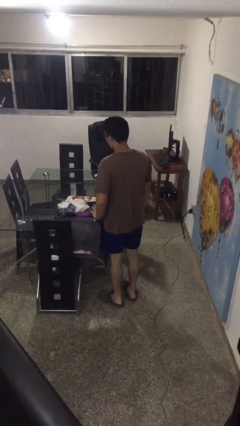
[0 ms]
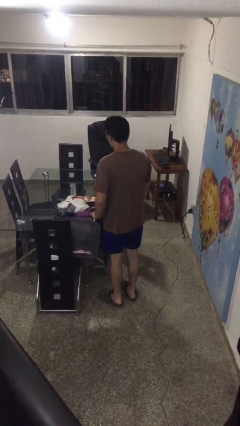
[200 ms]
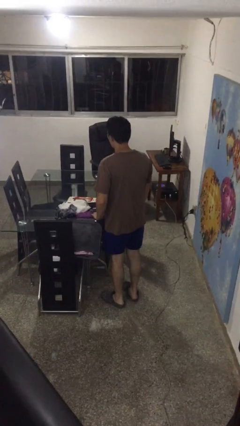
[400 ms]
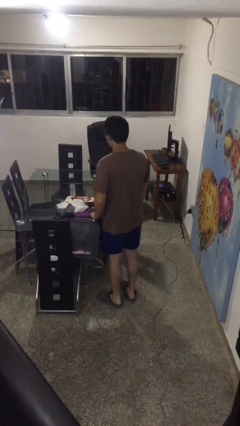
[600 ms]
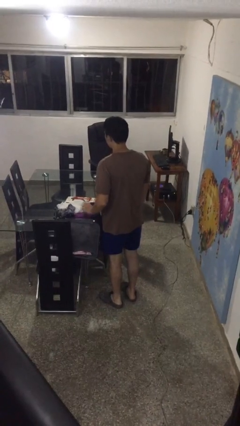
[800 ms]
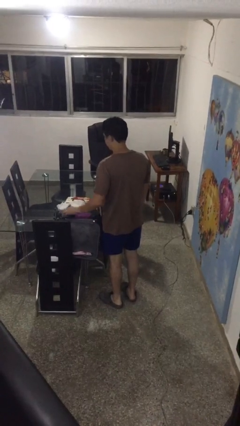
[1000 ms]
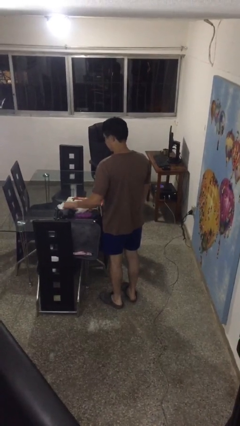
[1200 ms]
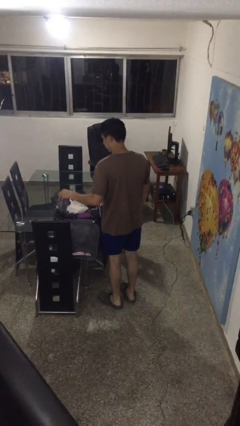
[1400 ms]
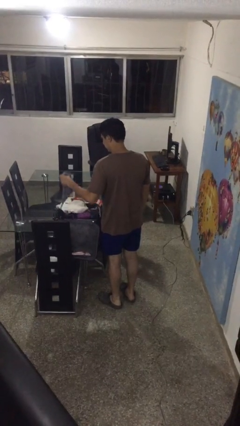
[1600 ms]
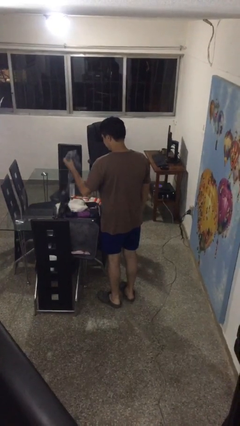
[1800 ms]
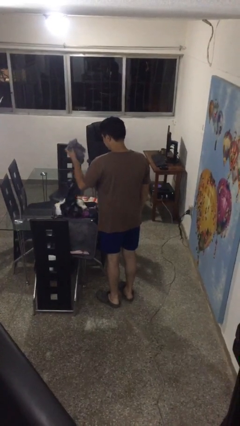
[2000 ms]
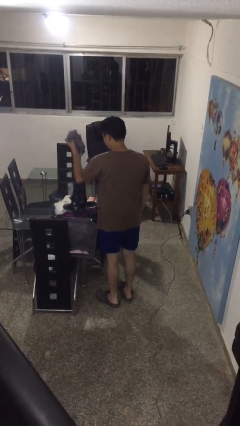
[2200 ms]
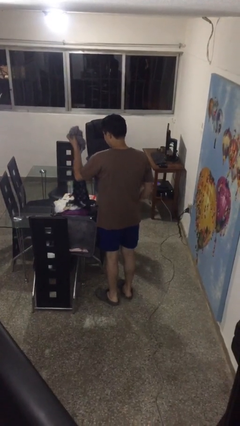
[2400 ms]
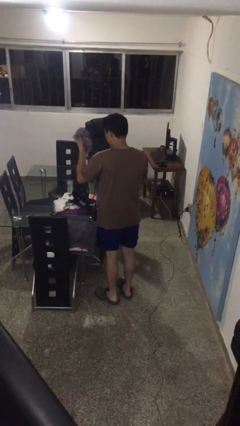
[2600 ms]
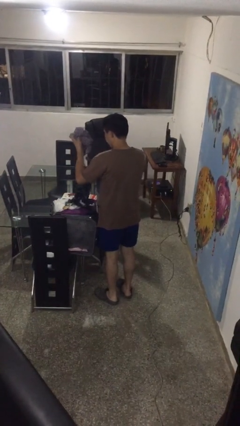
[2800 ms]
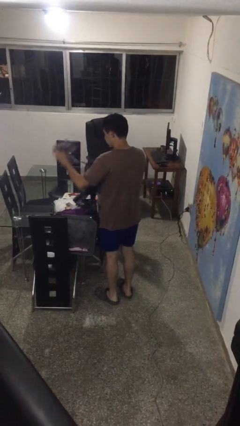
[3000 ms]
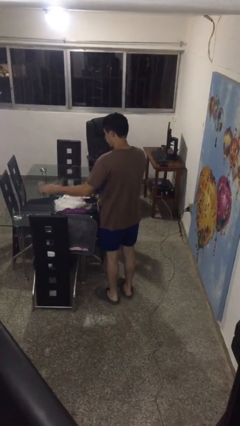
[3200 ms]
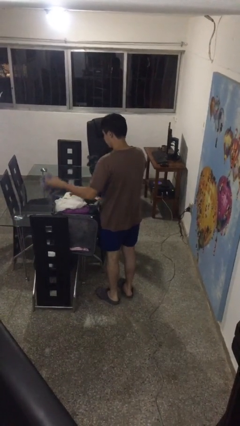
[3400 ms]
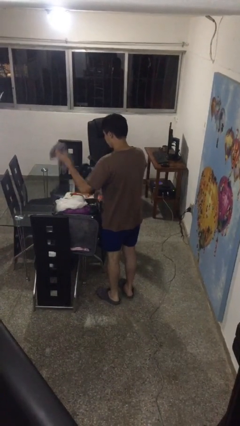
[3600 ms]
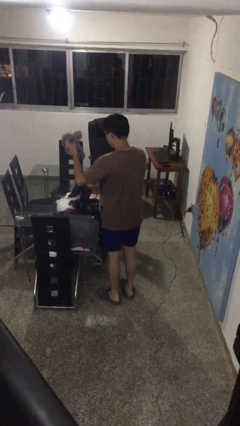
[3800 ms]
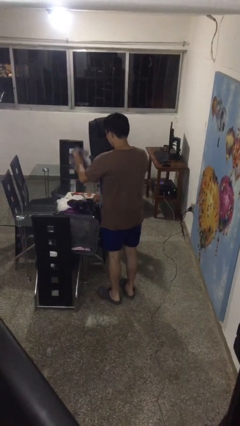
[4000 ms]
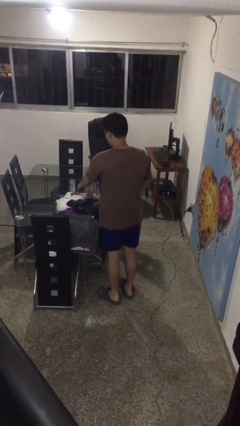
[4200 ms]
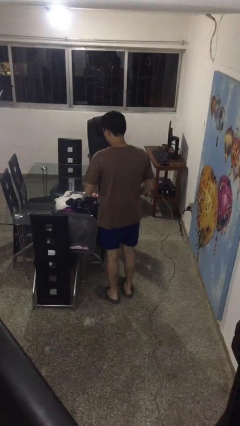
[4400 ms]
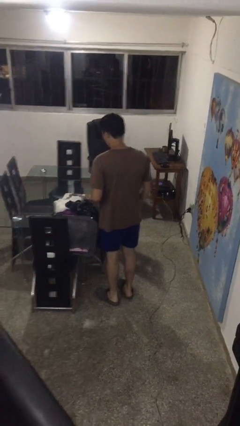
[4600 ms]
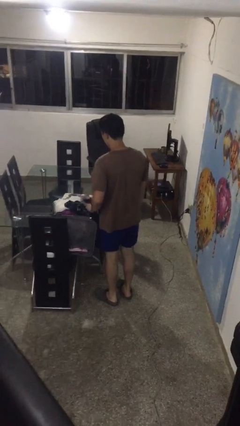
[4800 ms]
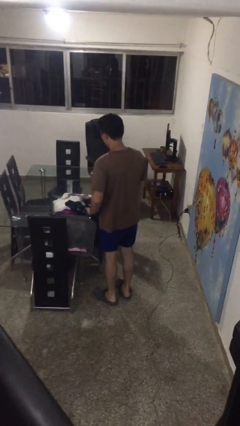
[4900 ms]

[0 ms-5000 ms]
person unloads clothes from suitcase

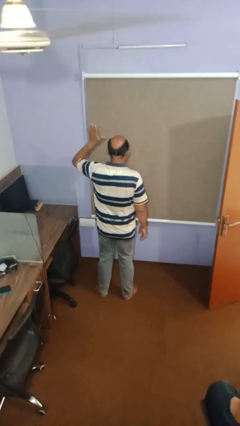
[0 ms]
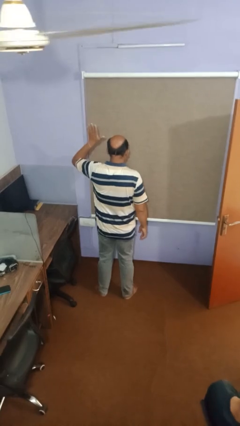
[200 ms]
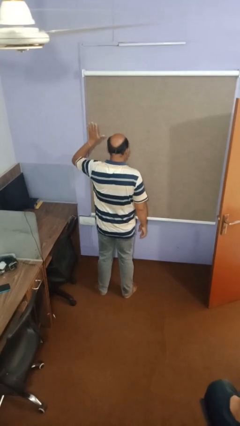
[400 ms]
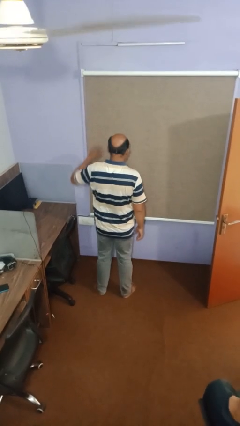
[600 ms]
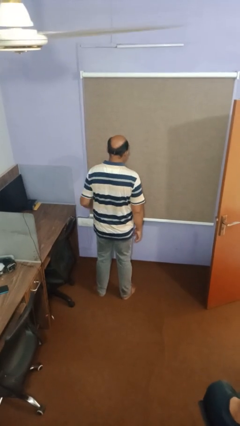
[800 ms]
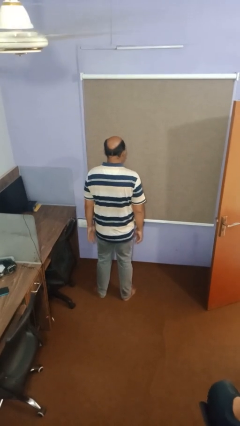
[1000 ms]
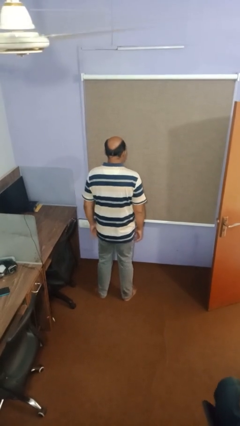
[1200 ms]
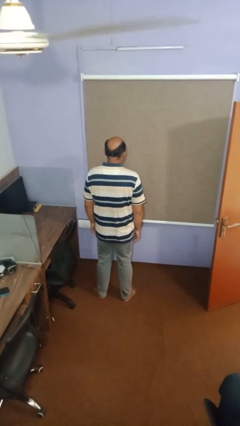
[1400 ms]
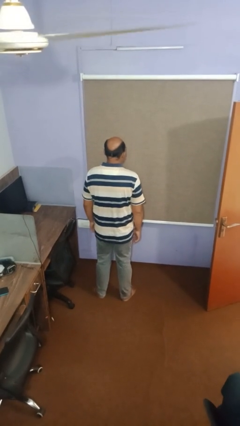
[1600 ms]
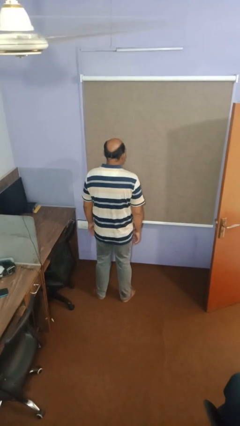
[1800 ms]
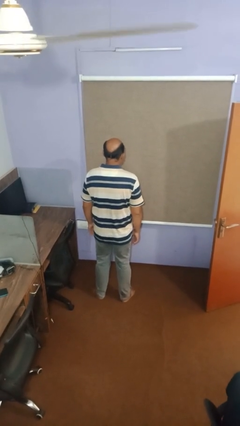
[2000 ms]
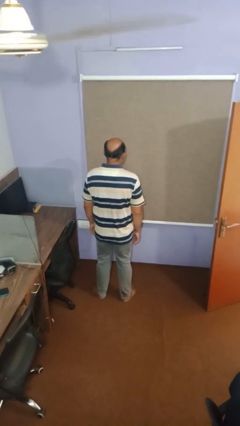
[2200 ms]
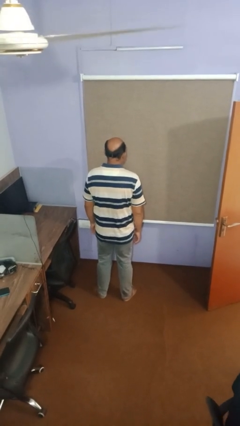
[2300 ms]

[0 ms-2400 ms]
person gestures lower hand

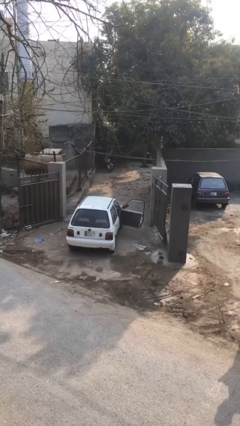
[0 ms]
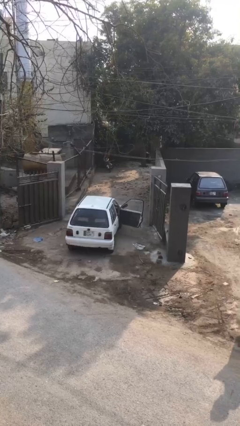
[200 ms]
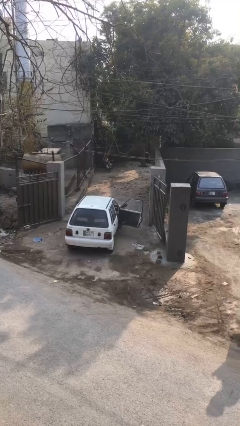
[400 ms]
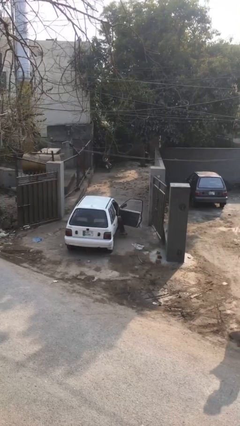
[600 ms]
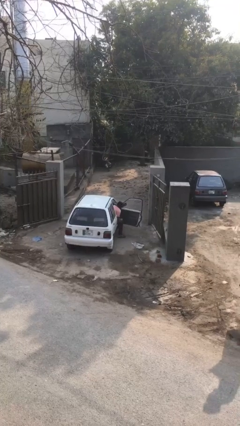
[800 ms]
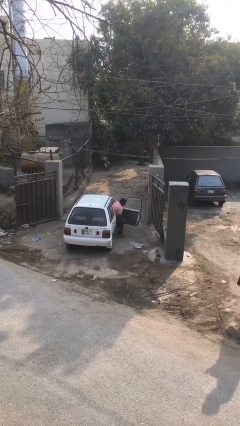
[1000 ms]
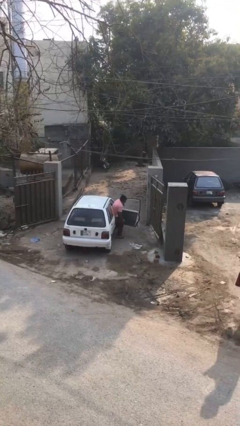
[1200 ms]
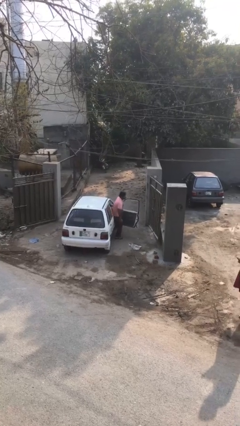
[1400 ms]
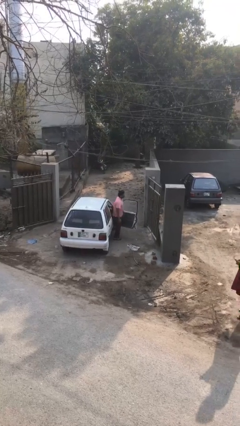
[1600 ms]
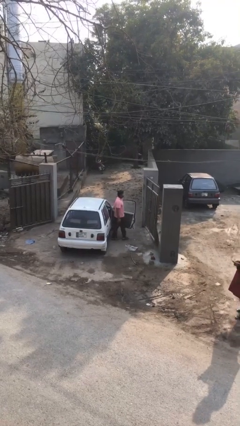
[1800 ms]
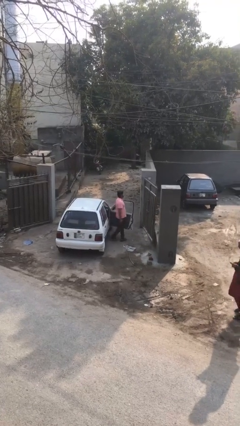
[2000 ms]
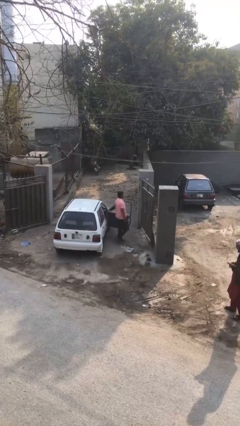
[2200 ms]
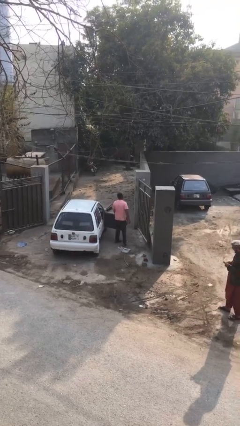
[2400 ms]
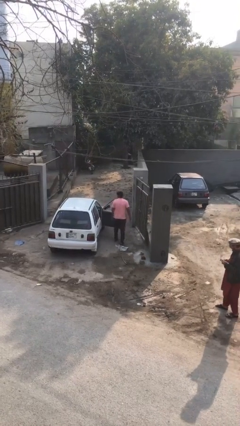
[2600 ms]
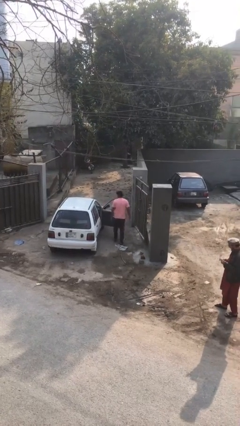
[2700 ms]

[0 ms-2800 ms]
person exits car

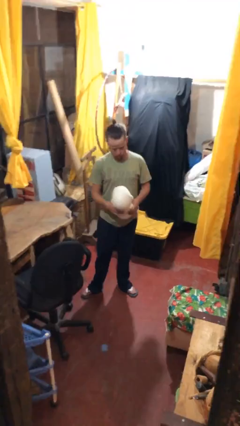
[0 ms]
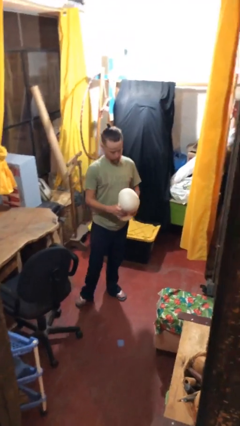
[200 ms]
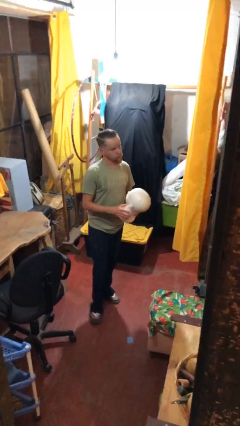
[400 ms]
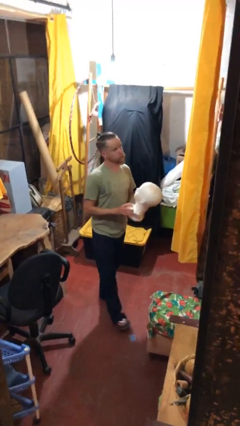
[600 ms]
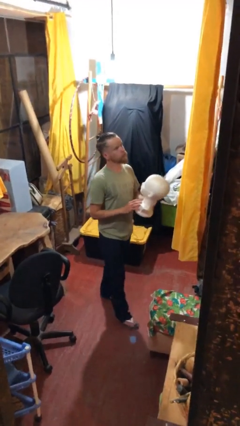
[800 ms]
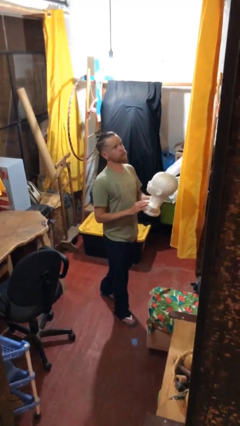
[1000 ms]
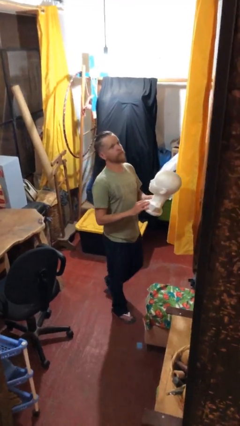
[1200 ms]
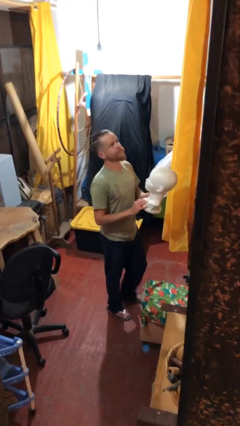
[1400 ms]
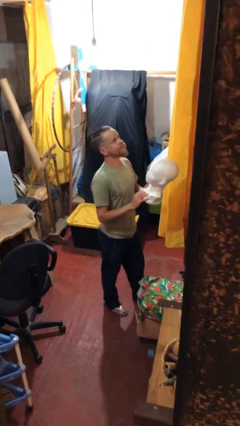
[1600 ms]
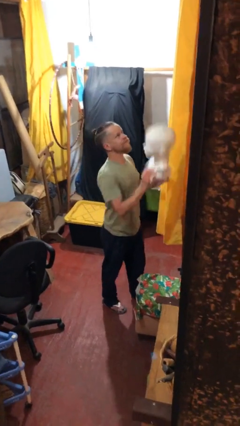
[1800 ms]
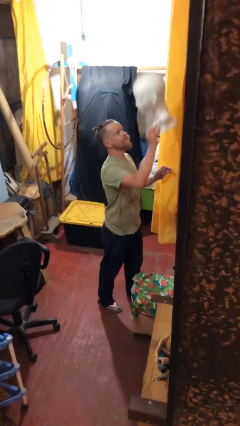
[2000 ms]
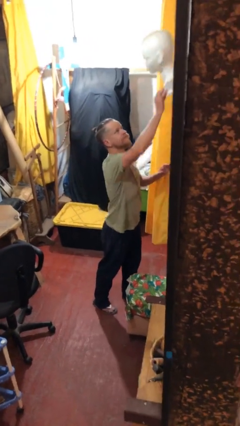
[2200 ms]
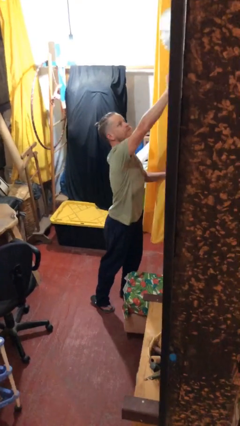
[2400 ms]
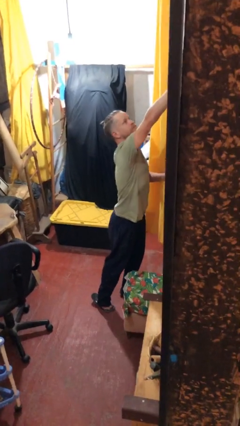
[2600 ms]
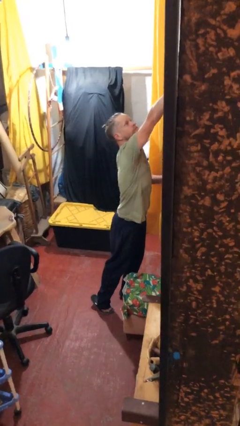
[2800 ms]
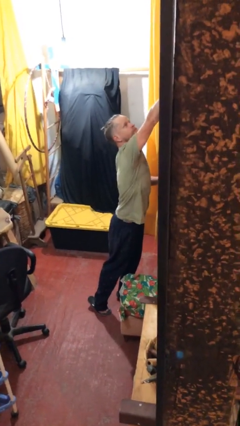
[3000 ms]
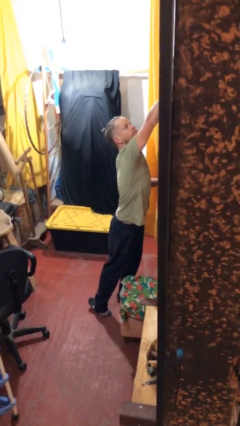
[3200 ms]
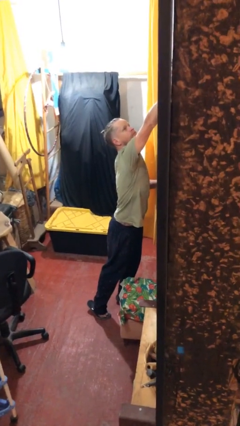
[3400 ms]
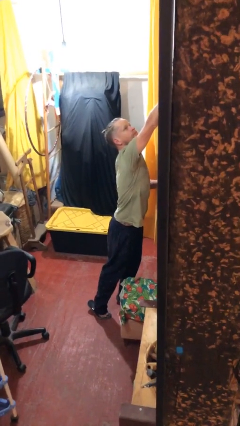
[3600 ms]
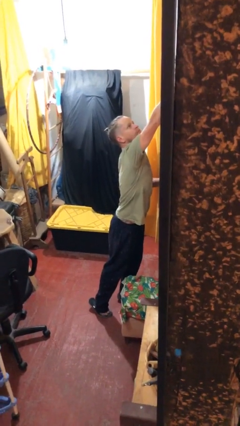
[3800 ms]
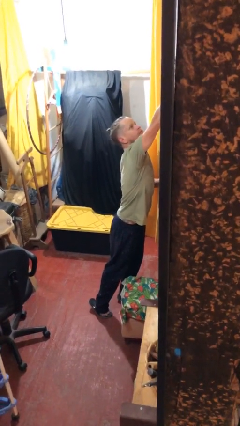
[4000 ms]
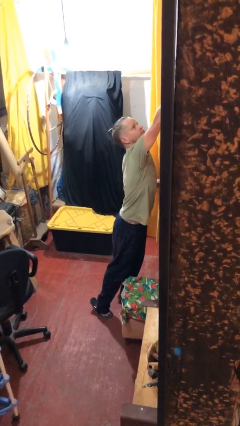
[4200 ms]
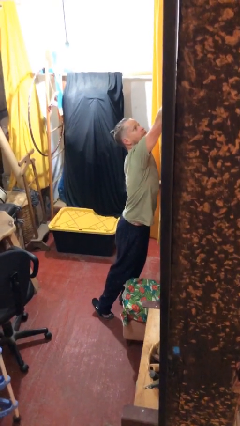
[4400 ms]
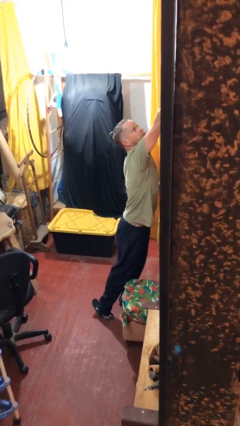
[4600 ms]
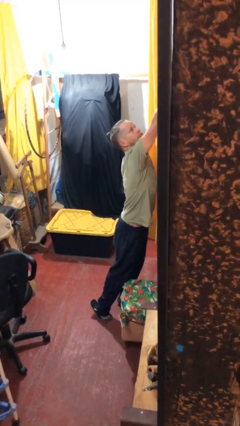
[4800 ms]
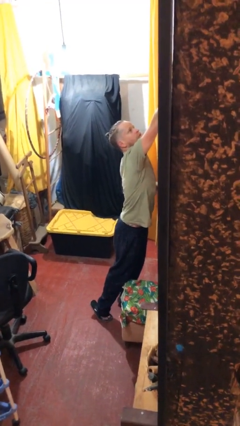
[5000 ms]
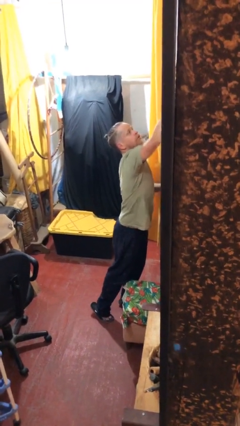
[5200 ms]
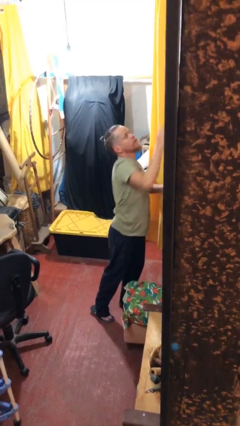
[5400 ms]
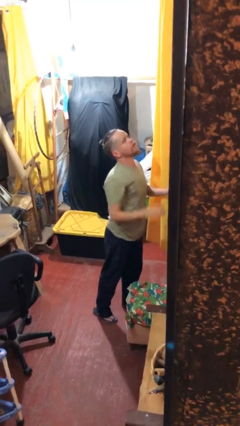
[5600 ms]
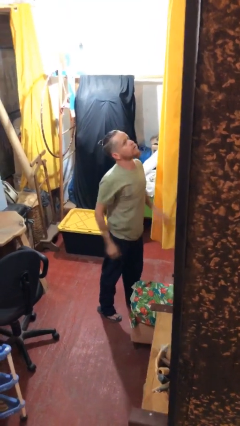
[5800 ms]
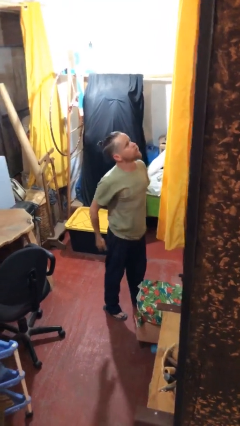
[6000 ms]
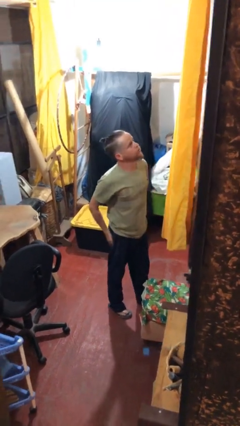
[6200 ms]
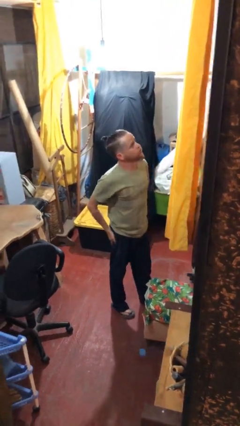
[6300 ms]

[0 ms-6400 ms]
person puts down object on shelf

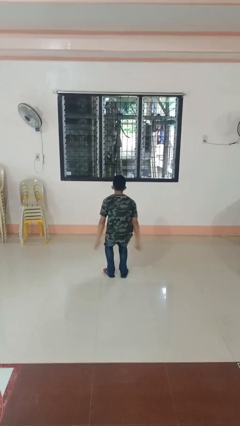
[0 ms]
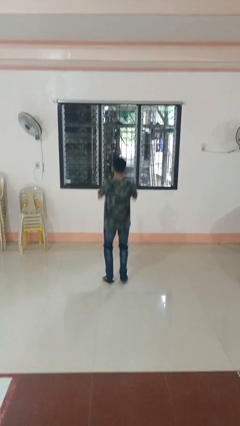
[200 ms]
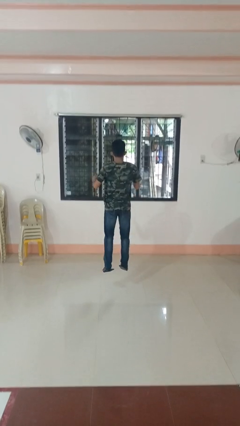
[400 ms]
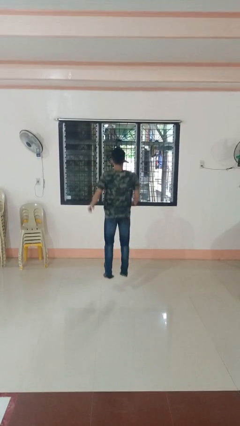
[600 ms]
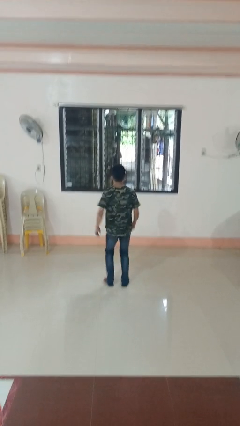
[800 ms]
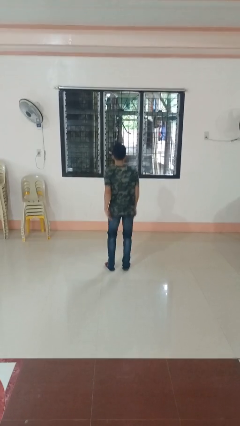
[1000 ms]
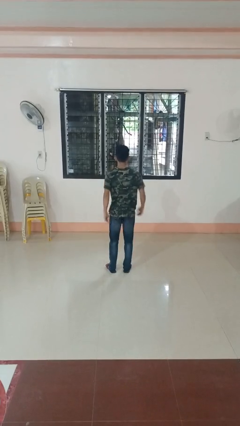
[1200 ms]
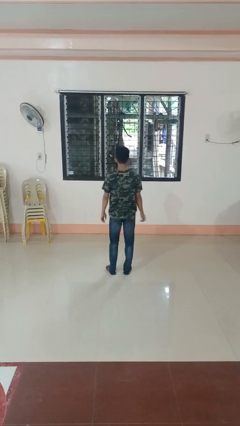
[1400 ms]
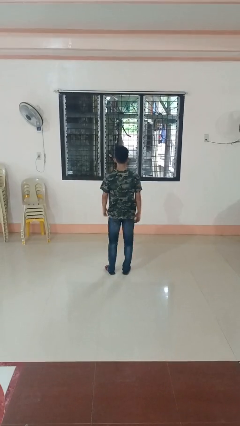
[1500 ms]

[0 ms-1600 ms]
person jumps
